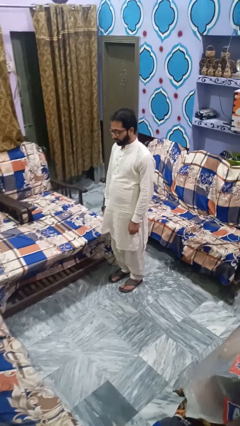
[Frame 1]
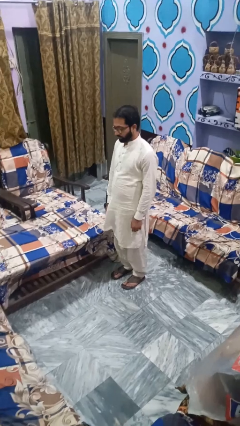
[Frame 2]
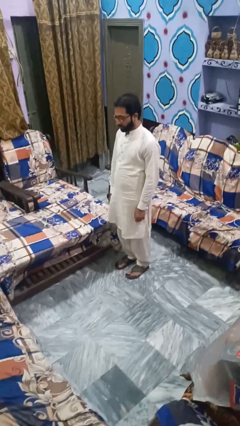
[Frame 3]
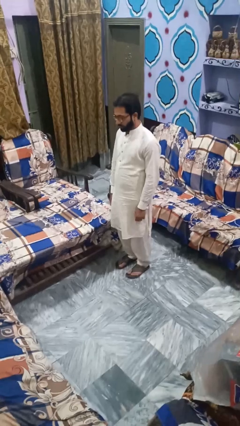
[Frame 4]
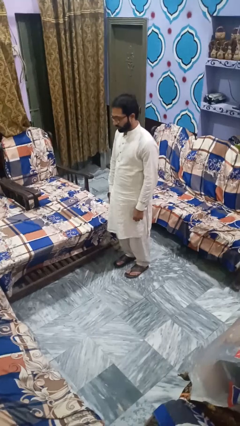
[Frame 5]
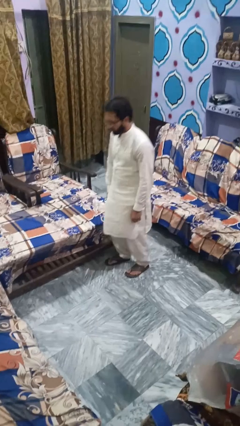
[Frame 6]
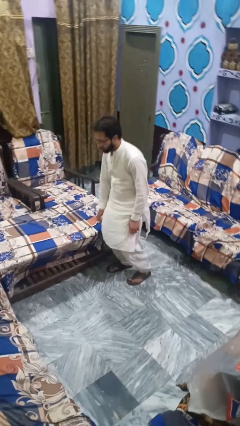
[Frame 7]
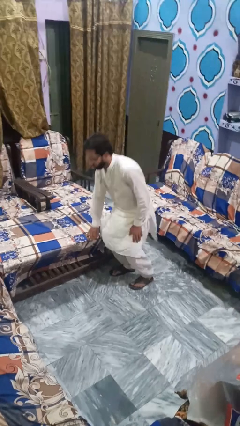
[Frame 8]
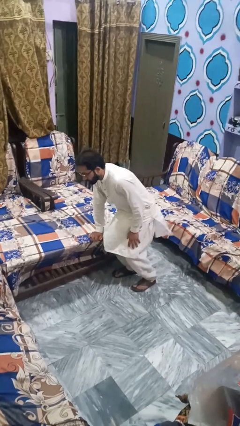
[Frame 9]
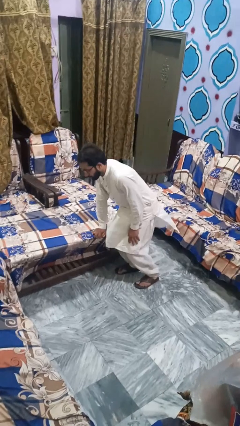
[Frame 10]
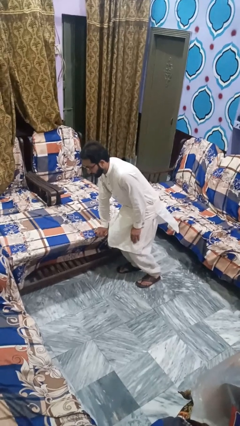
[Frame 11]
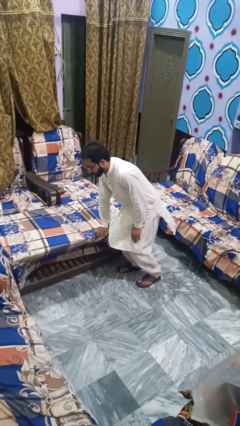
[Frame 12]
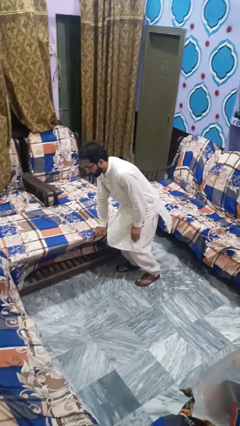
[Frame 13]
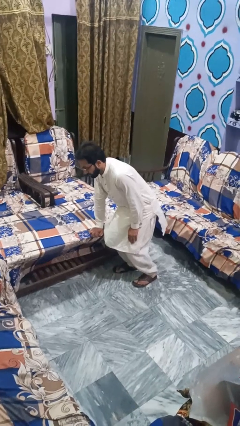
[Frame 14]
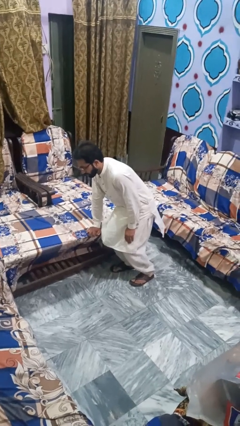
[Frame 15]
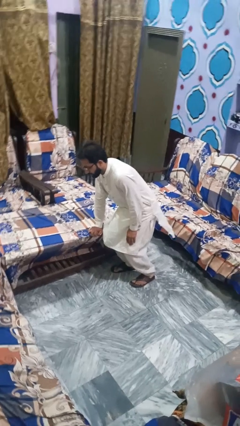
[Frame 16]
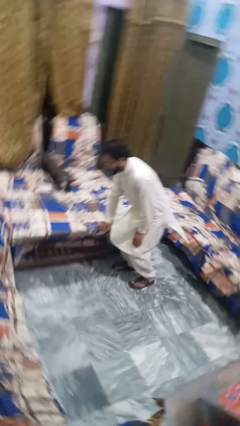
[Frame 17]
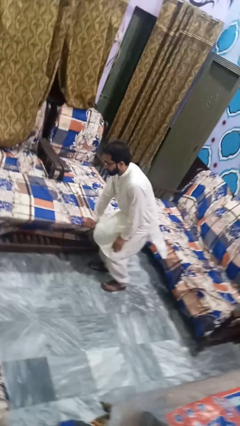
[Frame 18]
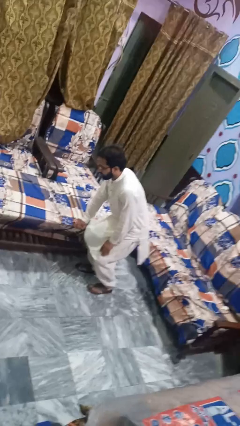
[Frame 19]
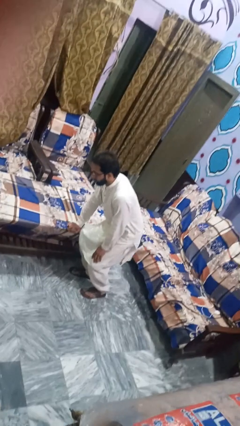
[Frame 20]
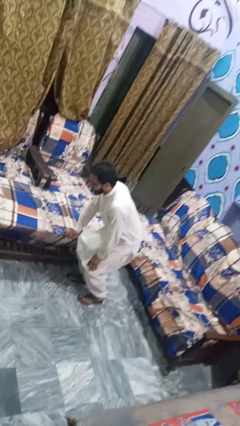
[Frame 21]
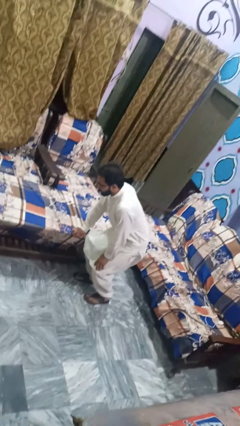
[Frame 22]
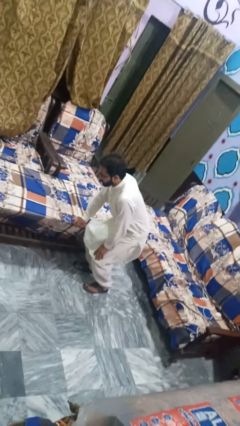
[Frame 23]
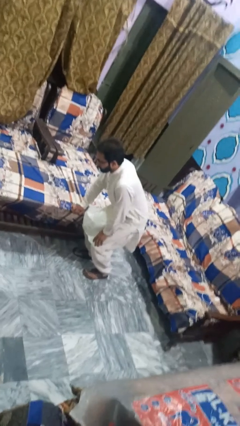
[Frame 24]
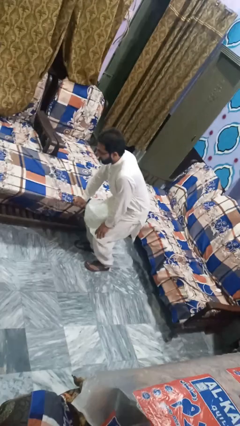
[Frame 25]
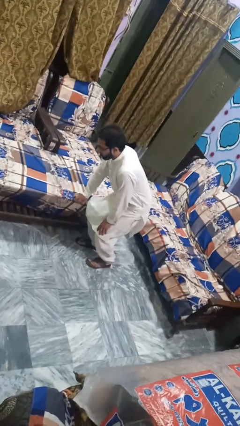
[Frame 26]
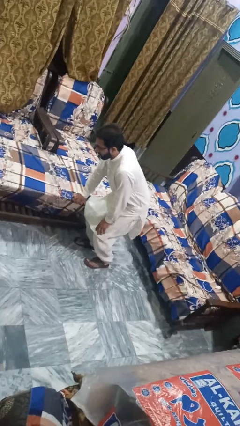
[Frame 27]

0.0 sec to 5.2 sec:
person trips on object on floor

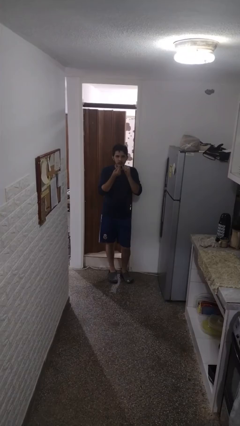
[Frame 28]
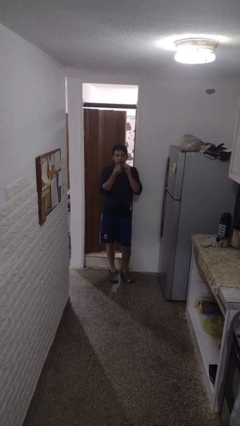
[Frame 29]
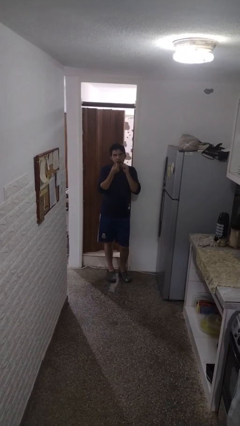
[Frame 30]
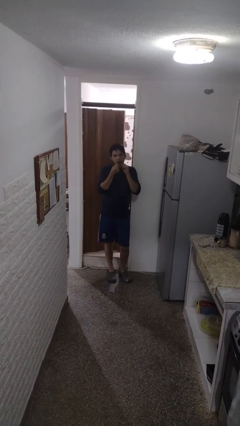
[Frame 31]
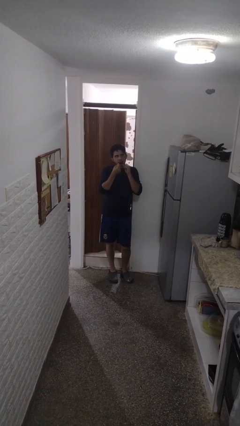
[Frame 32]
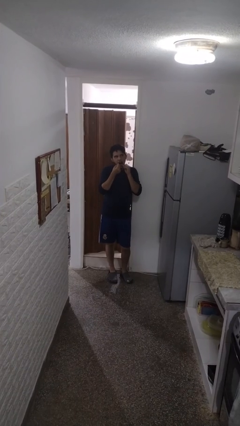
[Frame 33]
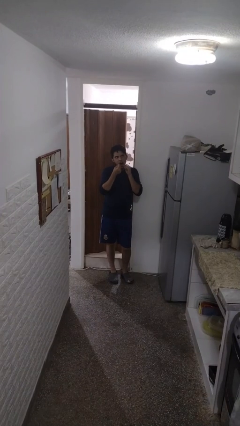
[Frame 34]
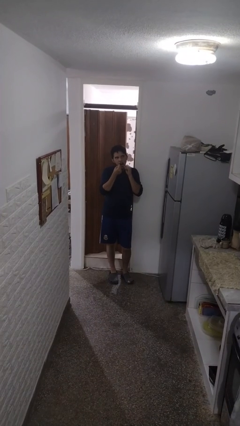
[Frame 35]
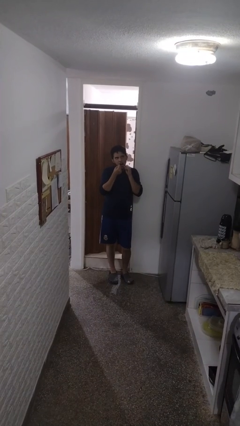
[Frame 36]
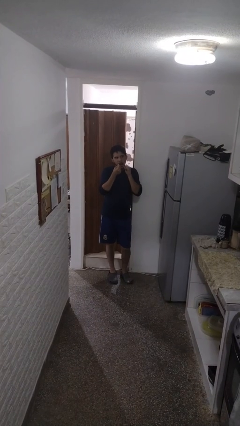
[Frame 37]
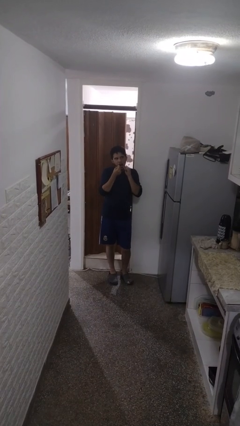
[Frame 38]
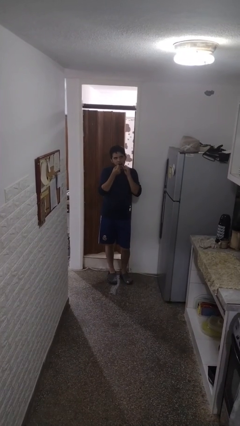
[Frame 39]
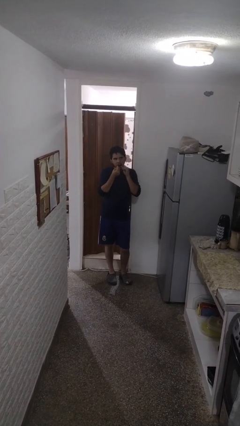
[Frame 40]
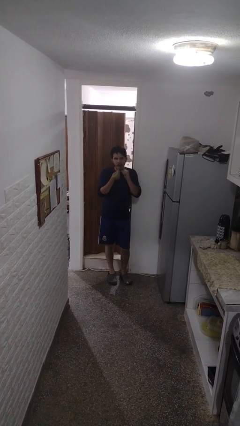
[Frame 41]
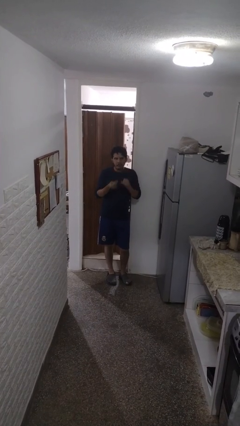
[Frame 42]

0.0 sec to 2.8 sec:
person flosses

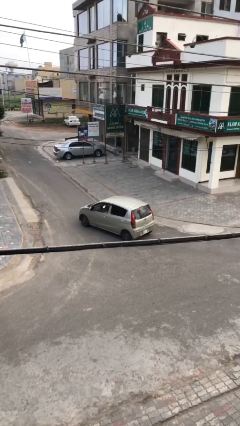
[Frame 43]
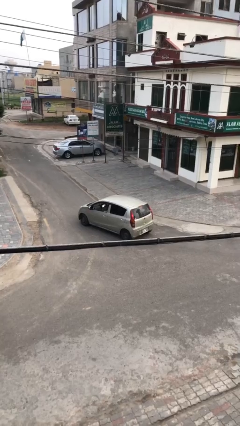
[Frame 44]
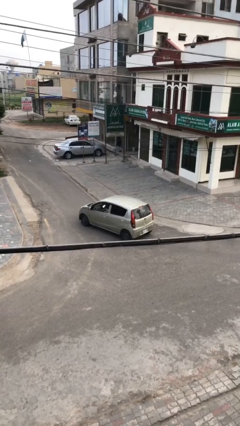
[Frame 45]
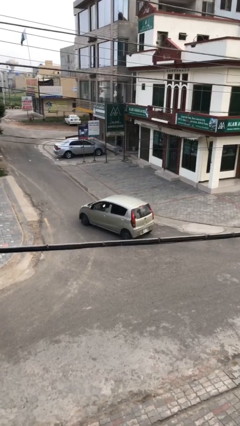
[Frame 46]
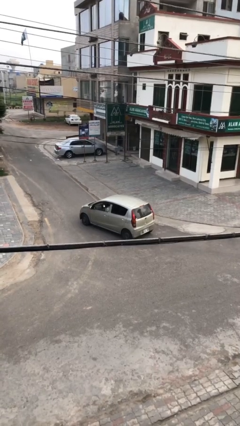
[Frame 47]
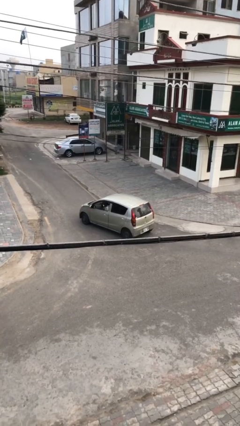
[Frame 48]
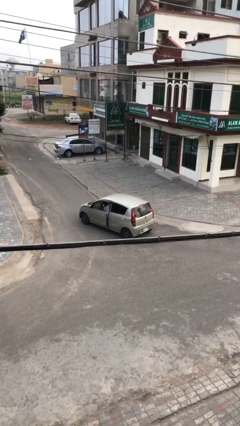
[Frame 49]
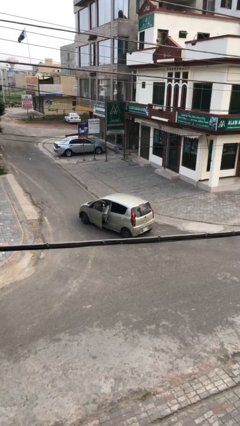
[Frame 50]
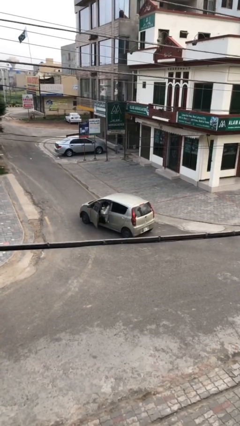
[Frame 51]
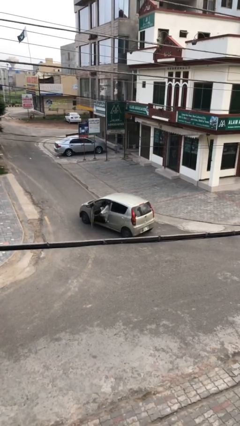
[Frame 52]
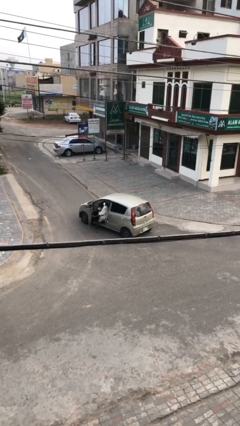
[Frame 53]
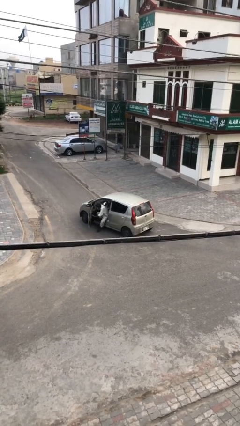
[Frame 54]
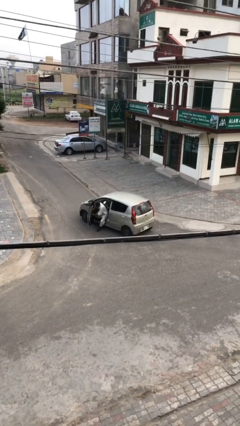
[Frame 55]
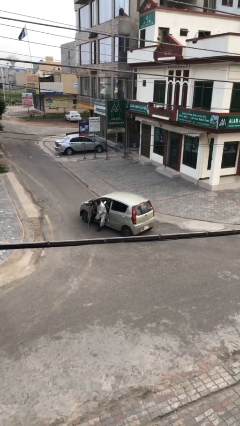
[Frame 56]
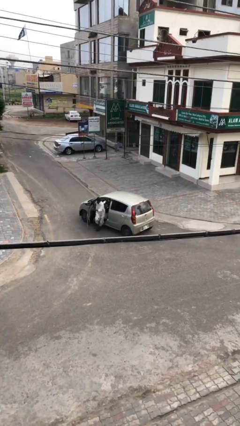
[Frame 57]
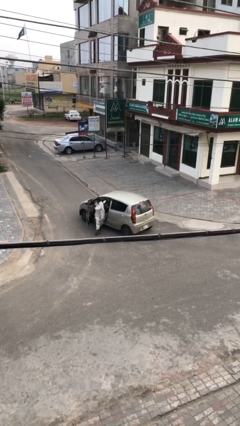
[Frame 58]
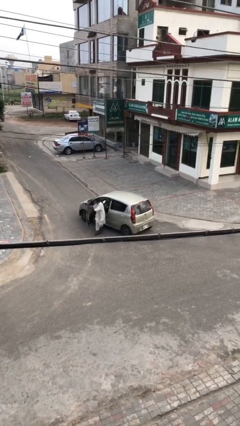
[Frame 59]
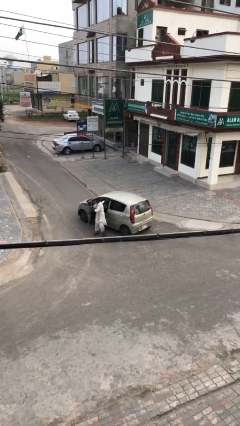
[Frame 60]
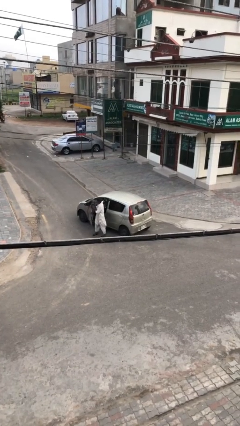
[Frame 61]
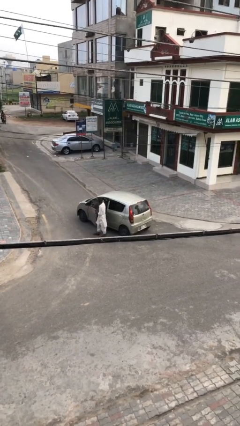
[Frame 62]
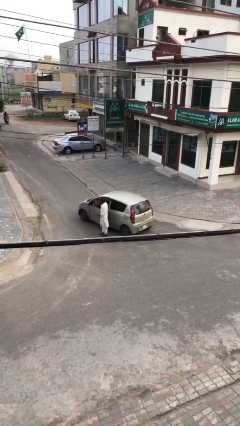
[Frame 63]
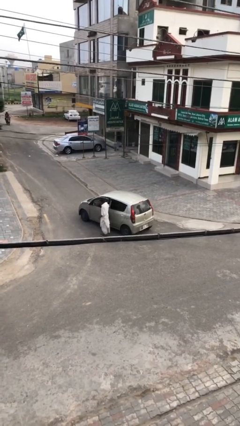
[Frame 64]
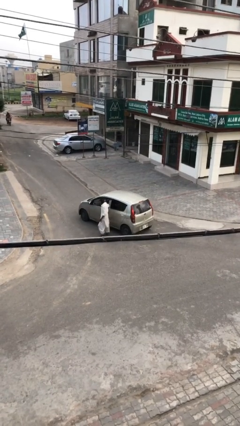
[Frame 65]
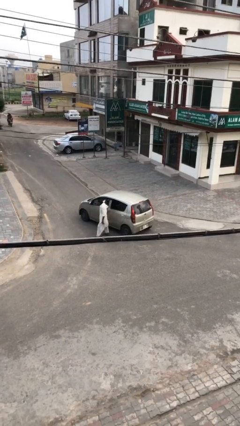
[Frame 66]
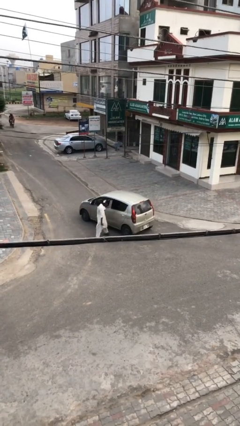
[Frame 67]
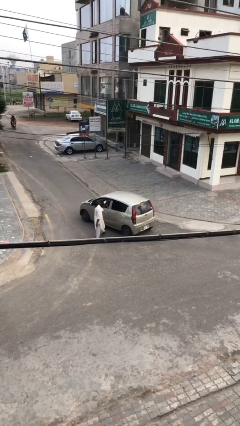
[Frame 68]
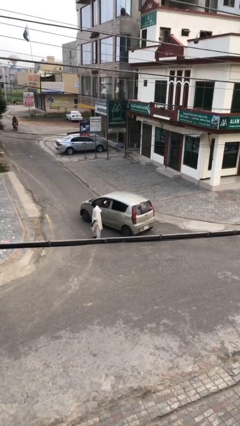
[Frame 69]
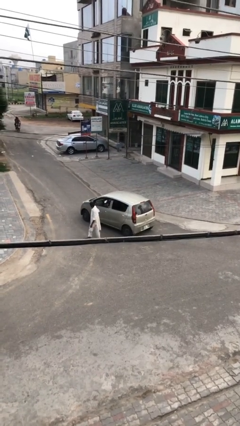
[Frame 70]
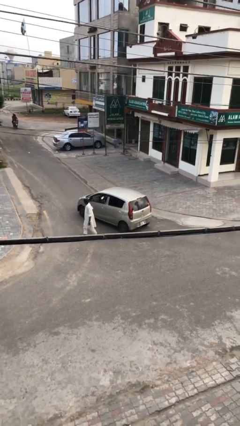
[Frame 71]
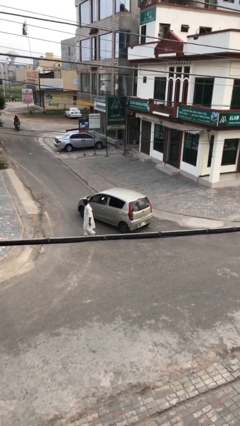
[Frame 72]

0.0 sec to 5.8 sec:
car drops off person

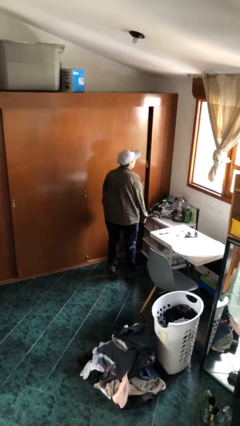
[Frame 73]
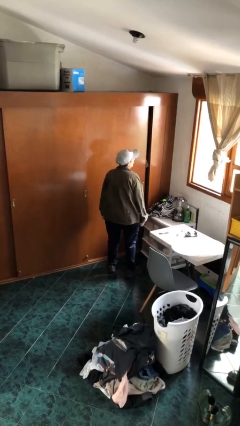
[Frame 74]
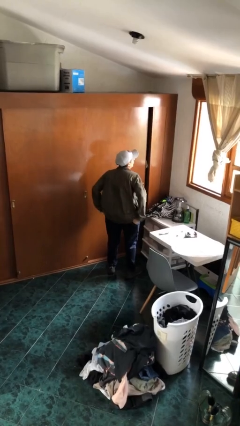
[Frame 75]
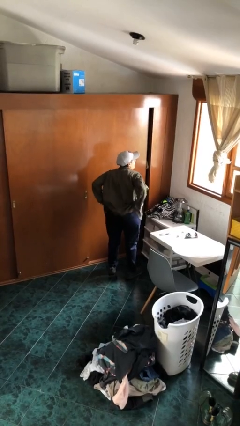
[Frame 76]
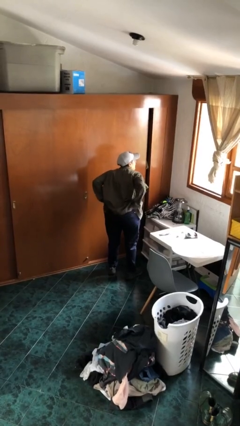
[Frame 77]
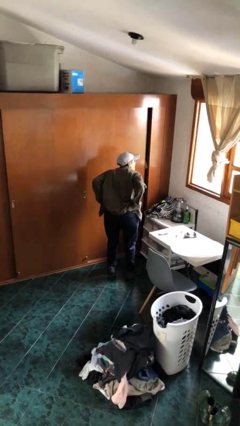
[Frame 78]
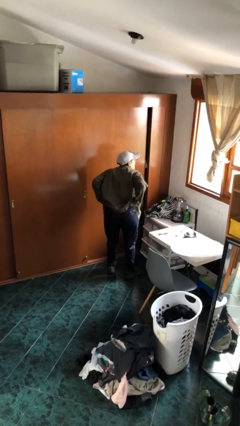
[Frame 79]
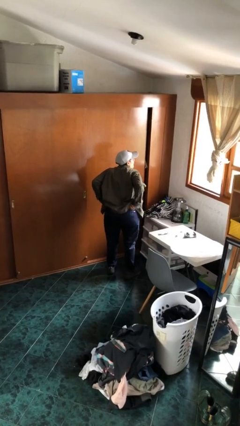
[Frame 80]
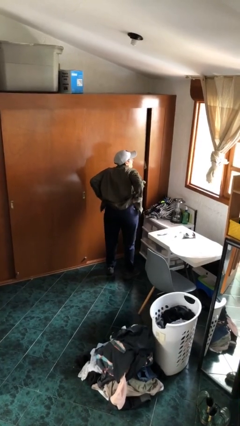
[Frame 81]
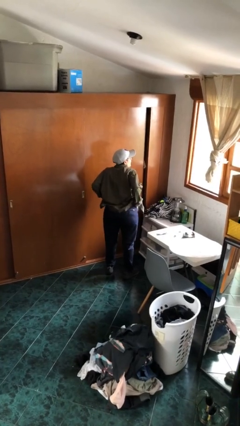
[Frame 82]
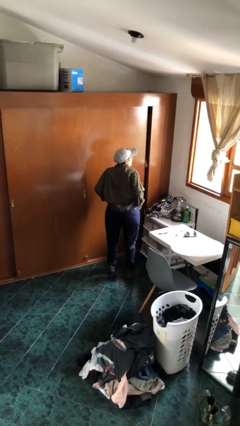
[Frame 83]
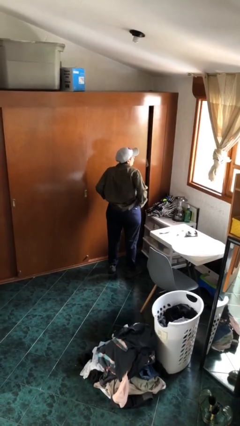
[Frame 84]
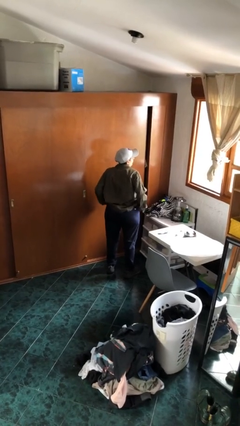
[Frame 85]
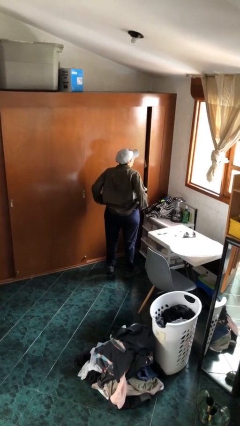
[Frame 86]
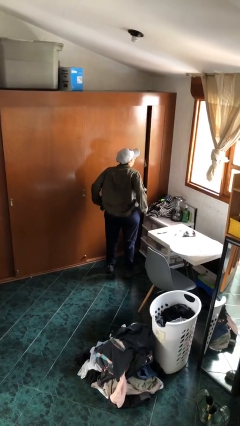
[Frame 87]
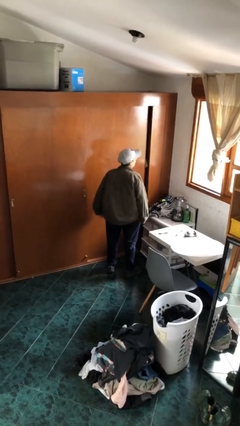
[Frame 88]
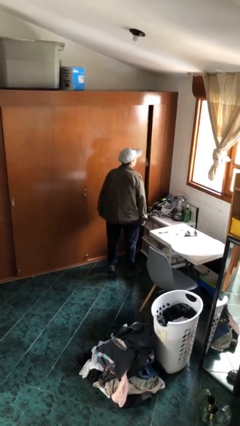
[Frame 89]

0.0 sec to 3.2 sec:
person hikes up pants

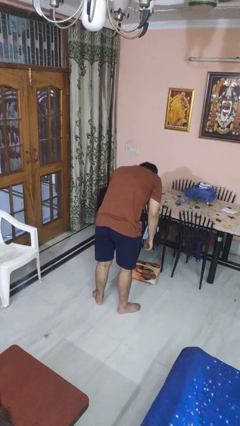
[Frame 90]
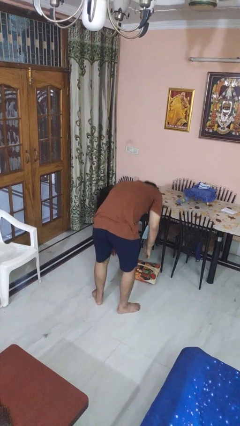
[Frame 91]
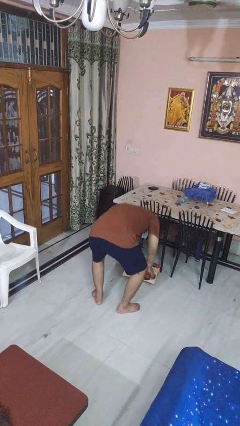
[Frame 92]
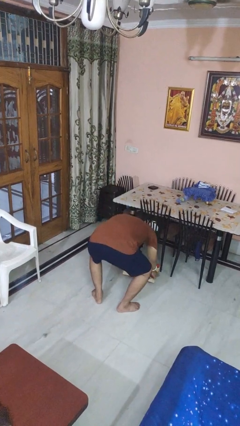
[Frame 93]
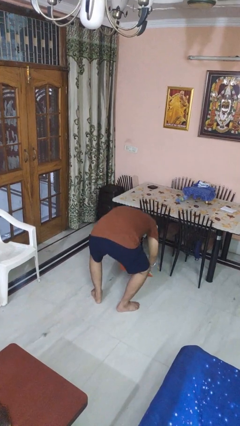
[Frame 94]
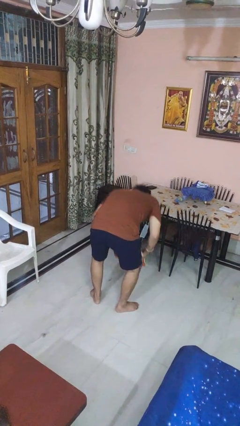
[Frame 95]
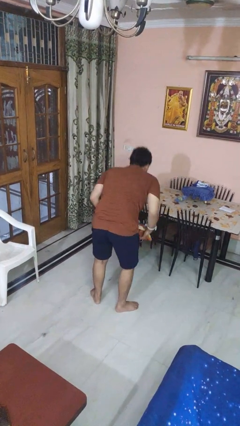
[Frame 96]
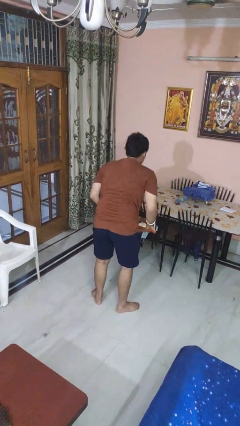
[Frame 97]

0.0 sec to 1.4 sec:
person picks up object from floor
